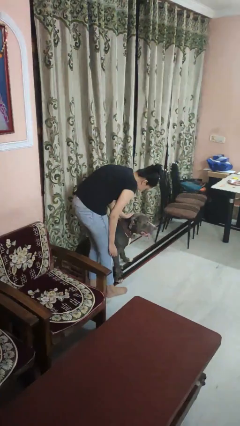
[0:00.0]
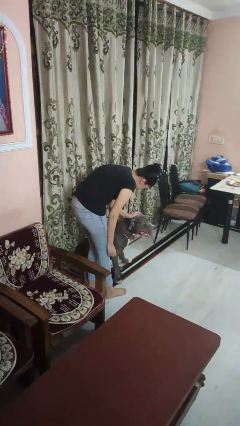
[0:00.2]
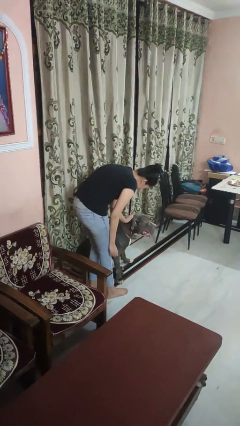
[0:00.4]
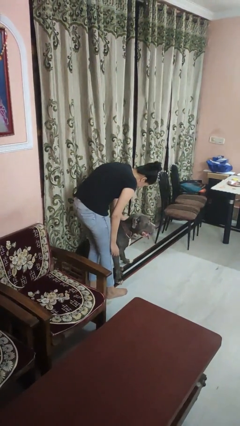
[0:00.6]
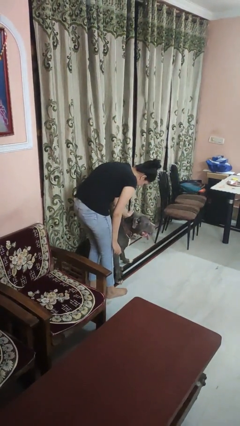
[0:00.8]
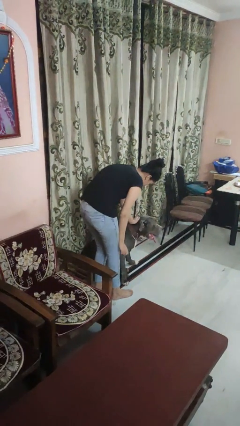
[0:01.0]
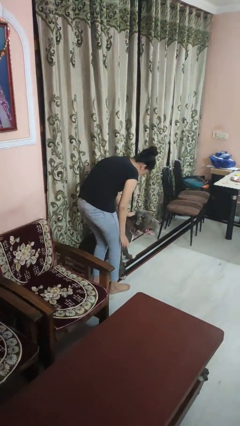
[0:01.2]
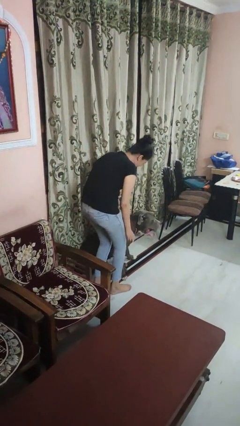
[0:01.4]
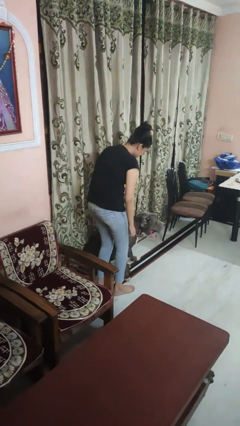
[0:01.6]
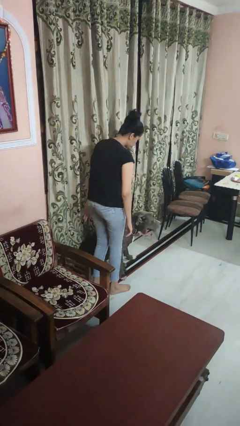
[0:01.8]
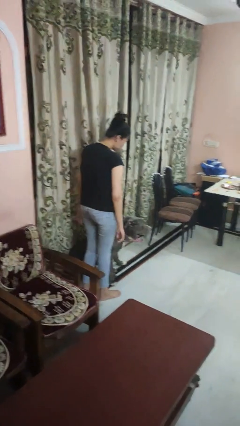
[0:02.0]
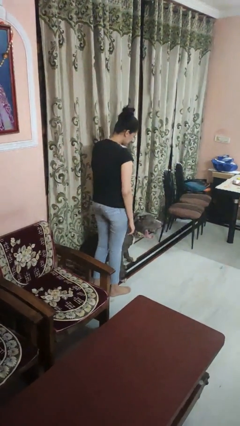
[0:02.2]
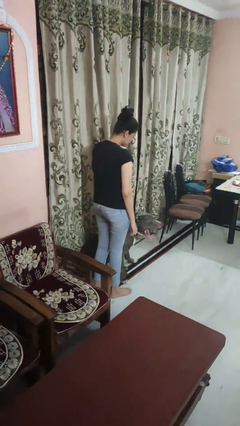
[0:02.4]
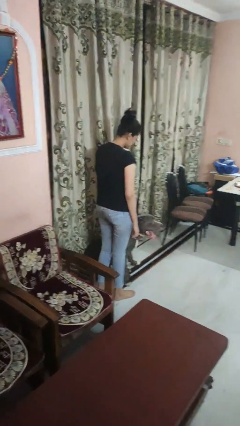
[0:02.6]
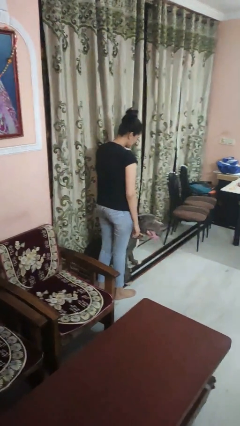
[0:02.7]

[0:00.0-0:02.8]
person pets dog

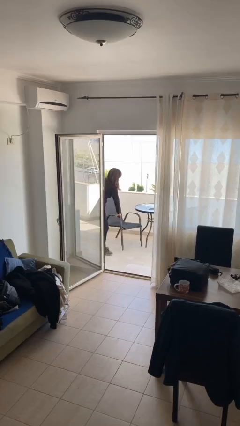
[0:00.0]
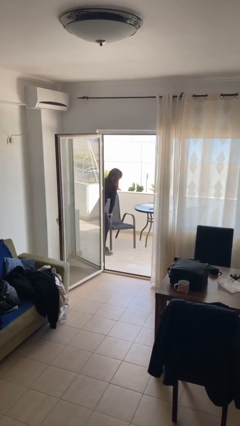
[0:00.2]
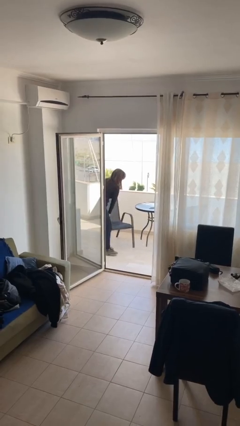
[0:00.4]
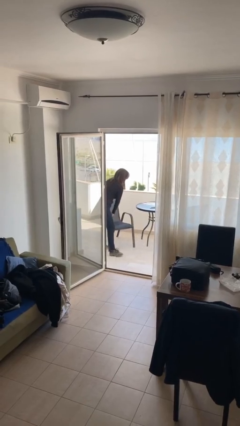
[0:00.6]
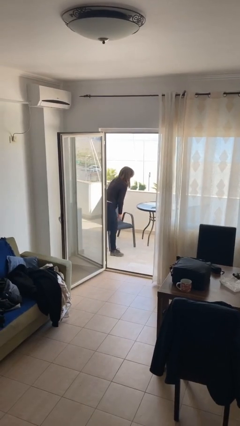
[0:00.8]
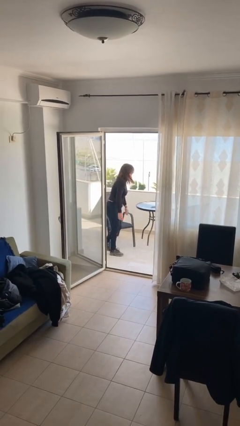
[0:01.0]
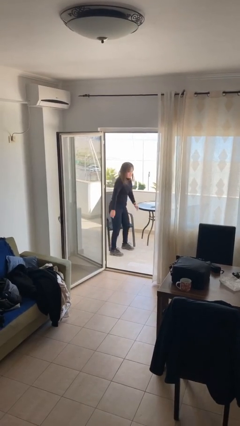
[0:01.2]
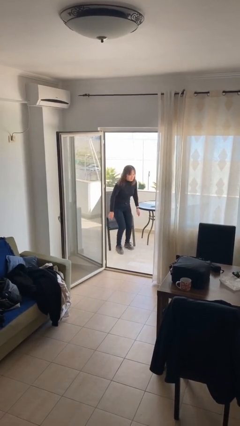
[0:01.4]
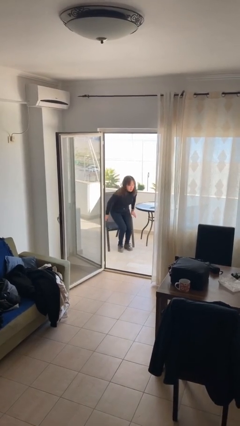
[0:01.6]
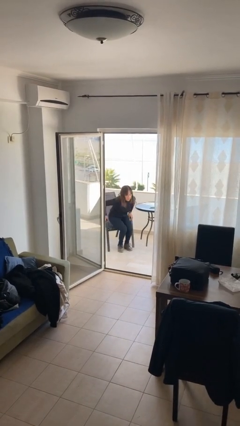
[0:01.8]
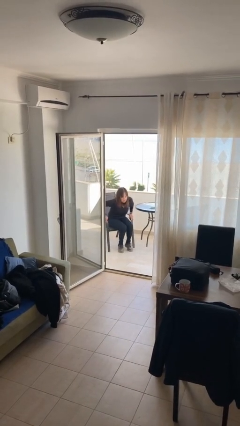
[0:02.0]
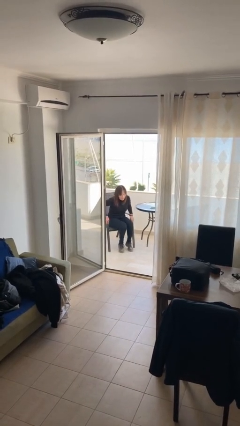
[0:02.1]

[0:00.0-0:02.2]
person sits down

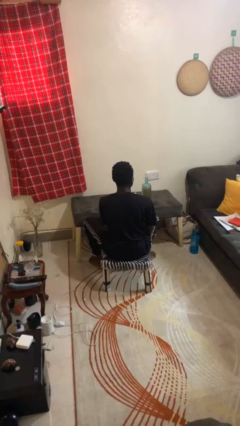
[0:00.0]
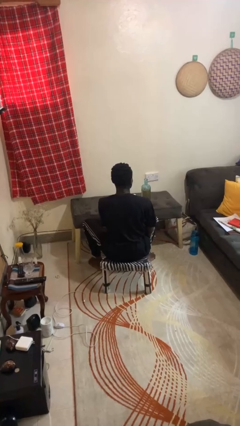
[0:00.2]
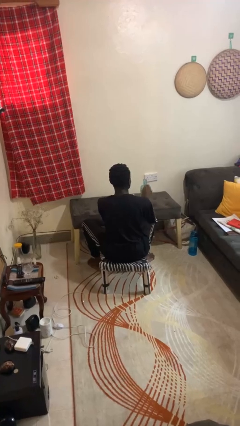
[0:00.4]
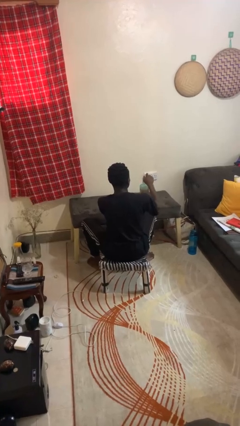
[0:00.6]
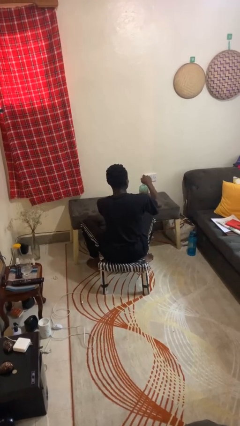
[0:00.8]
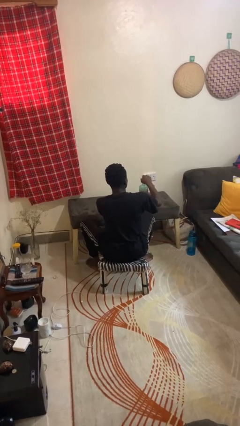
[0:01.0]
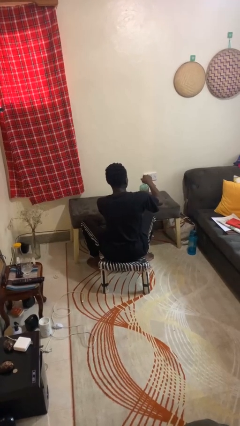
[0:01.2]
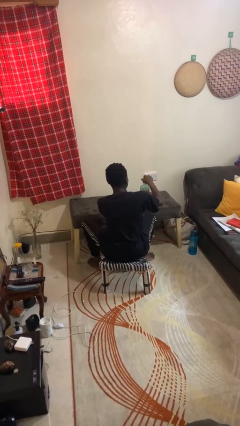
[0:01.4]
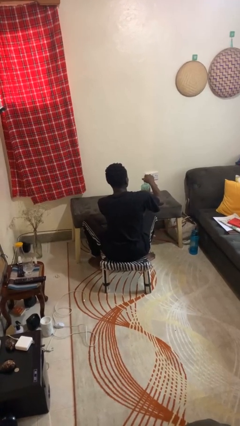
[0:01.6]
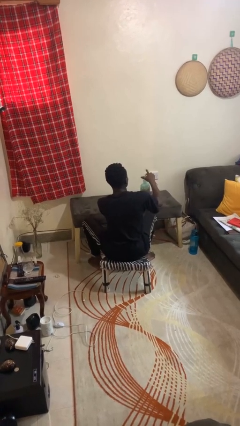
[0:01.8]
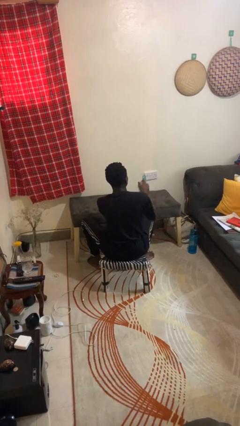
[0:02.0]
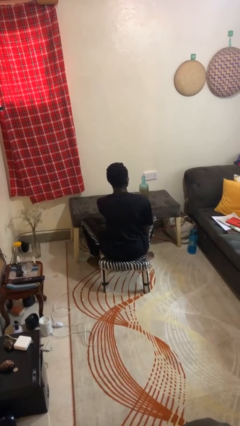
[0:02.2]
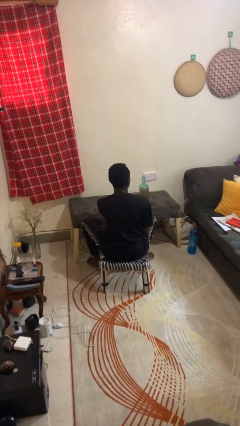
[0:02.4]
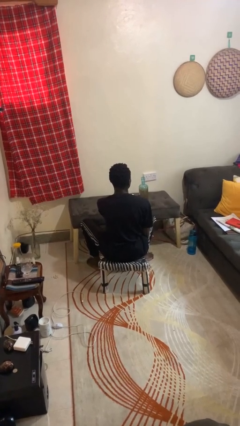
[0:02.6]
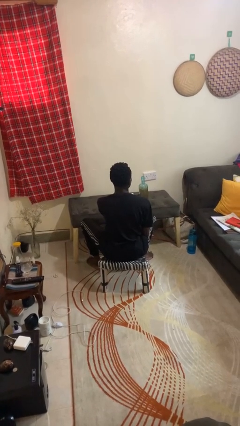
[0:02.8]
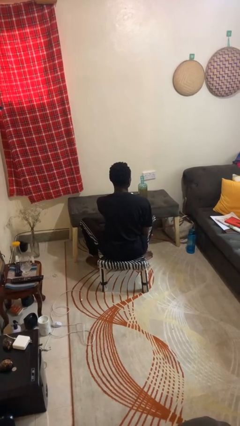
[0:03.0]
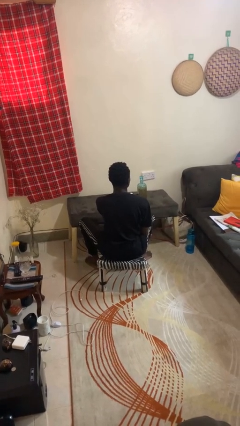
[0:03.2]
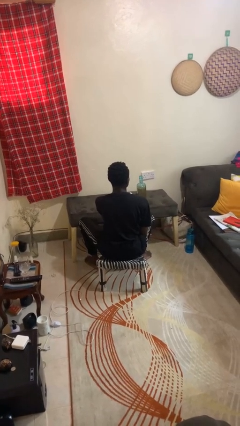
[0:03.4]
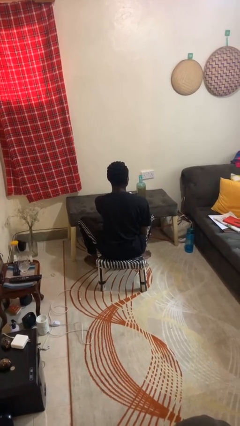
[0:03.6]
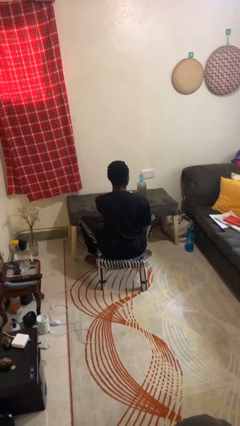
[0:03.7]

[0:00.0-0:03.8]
person closes jar

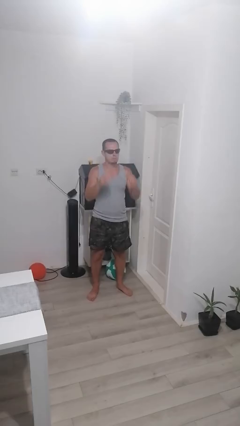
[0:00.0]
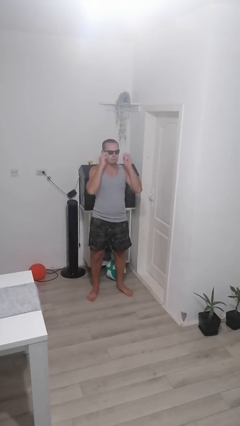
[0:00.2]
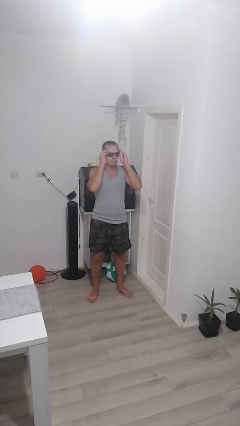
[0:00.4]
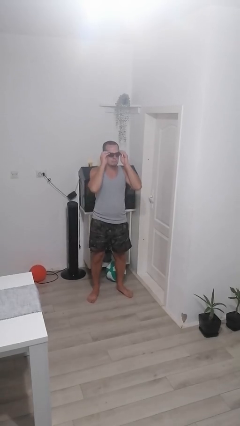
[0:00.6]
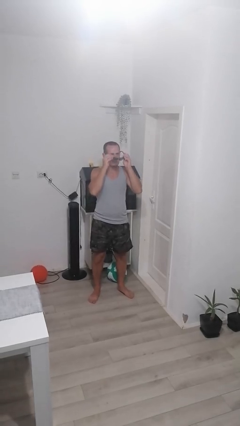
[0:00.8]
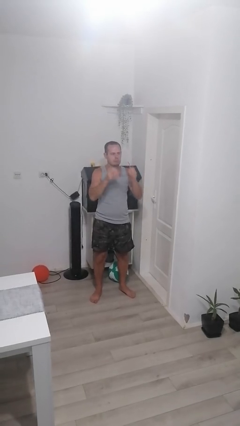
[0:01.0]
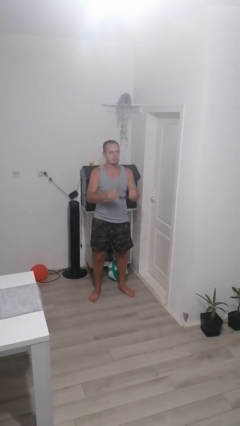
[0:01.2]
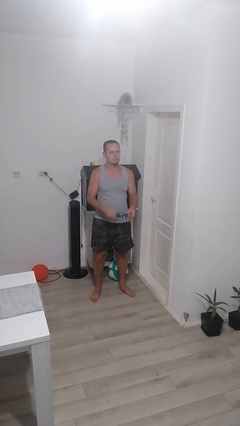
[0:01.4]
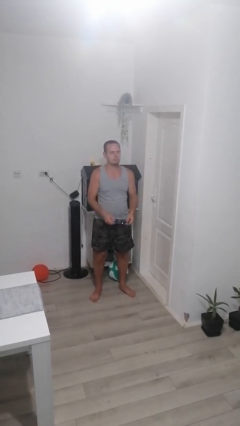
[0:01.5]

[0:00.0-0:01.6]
person takes off sunglasses

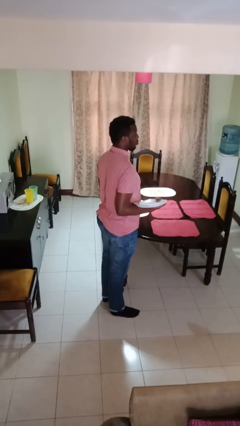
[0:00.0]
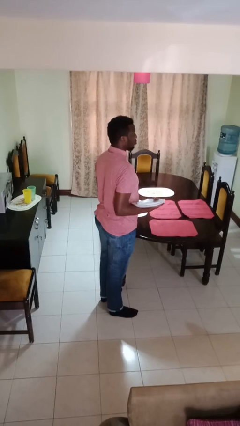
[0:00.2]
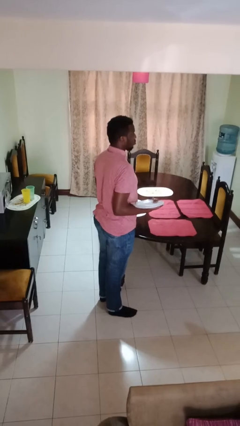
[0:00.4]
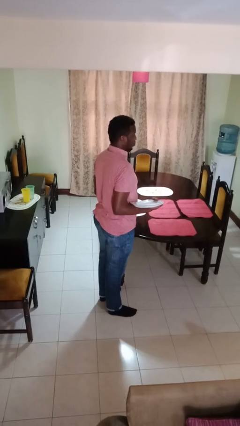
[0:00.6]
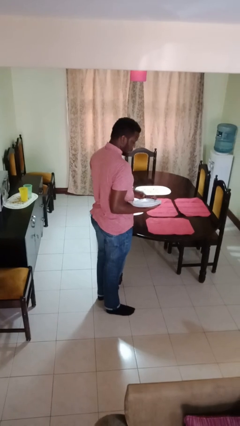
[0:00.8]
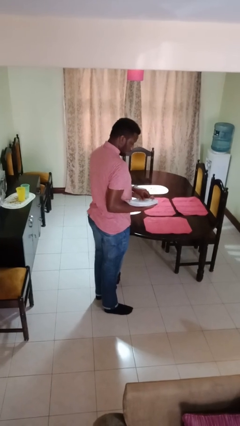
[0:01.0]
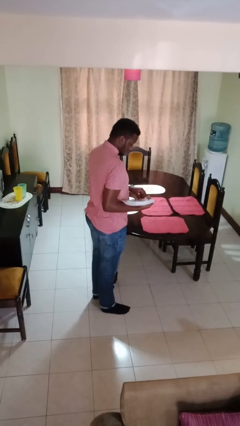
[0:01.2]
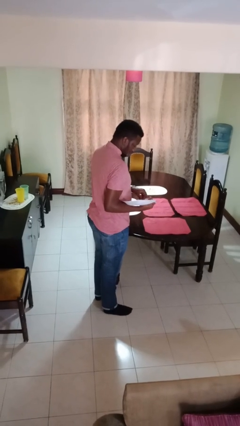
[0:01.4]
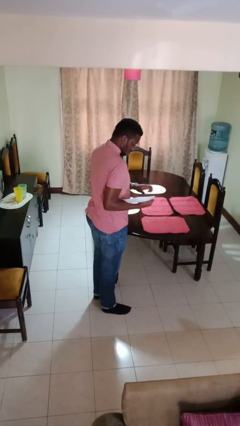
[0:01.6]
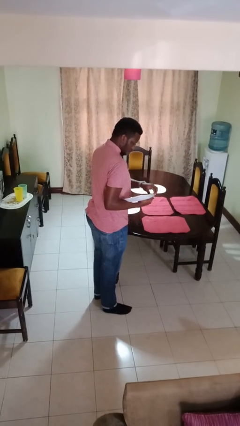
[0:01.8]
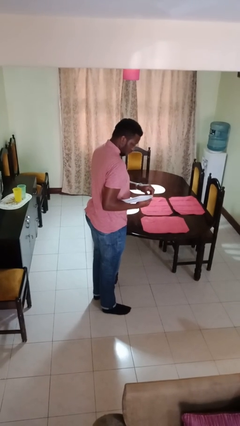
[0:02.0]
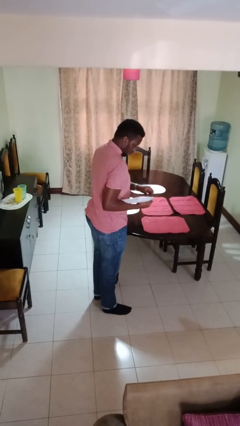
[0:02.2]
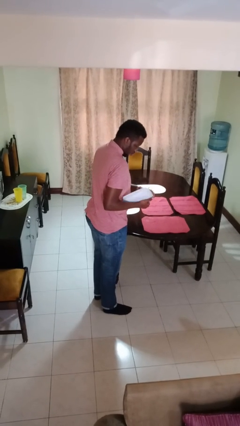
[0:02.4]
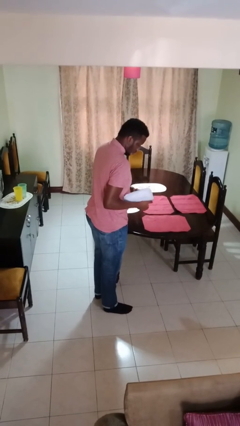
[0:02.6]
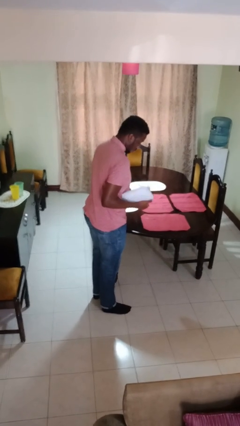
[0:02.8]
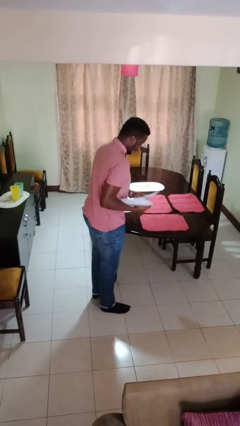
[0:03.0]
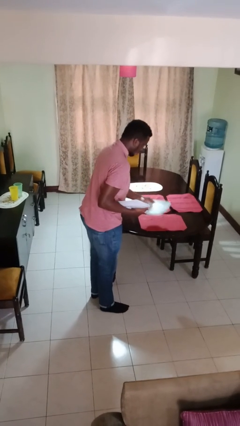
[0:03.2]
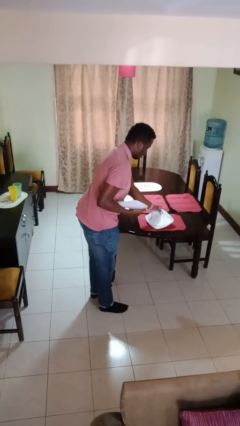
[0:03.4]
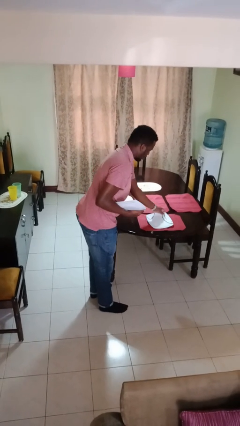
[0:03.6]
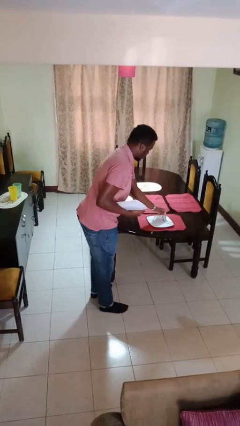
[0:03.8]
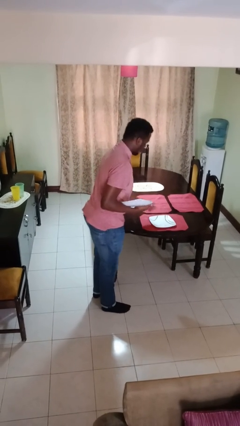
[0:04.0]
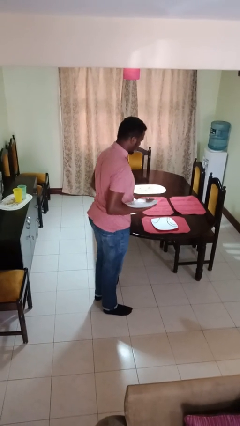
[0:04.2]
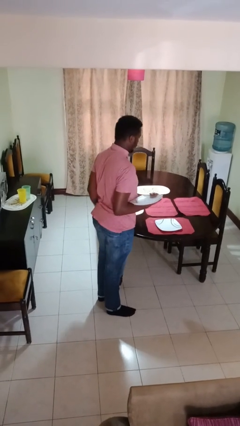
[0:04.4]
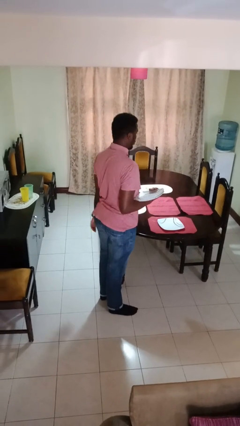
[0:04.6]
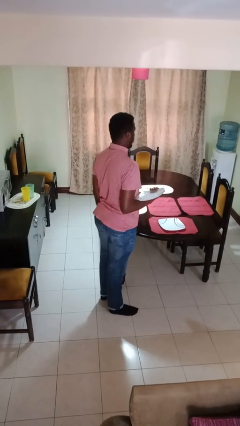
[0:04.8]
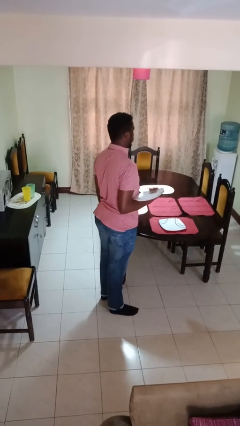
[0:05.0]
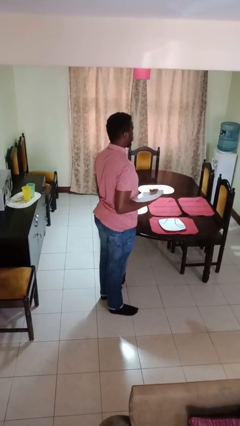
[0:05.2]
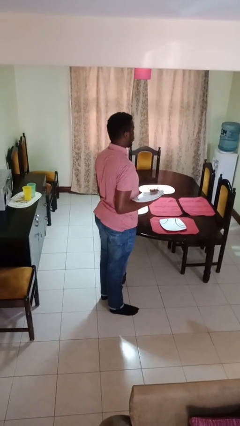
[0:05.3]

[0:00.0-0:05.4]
person sets table

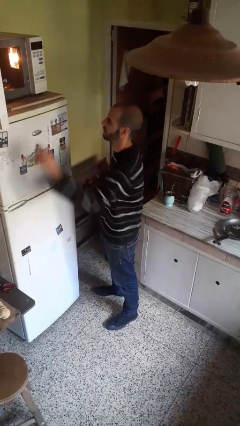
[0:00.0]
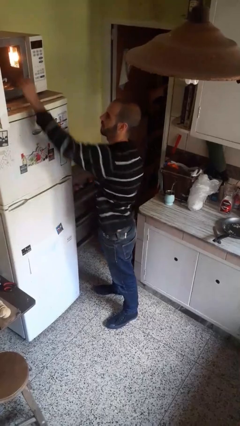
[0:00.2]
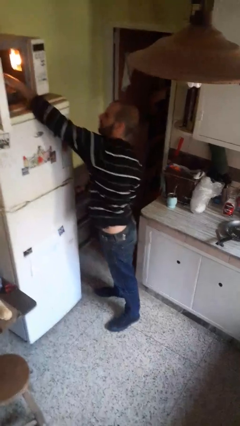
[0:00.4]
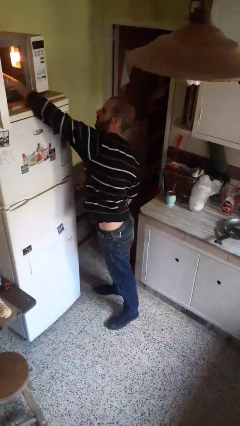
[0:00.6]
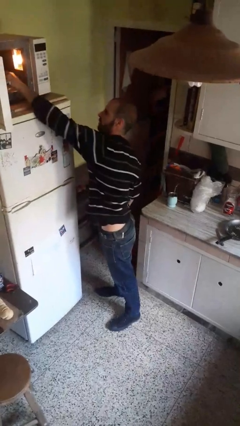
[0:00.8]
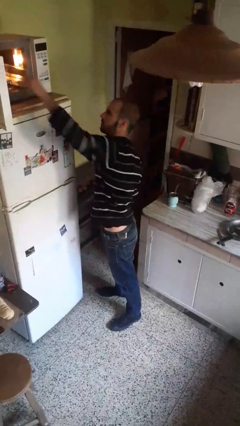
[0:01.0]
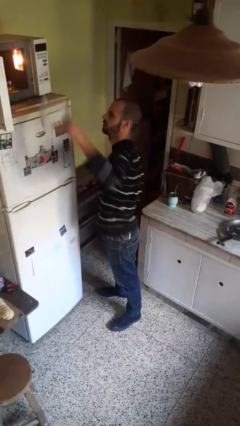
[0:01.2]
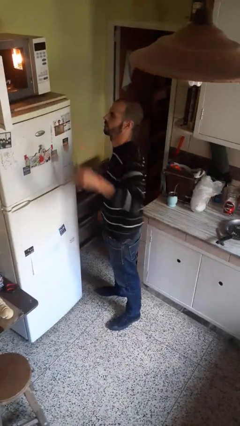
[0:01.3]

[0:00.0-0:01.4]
person takes object from microwave

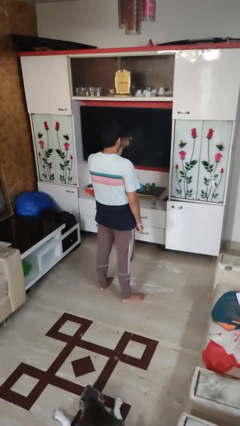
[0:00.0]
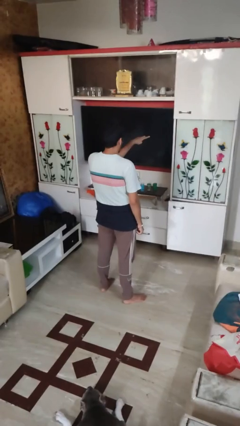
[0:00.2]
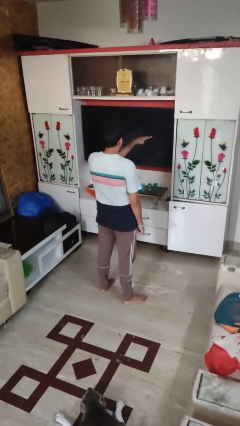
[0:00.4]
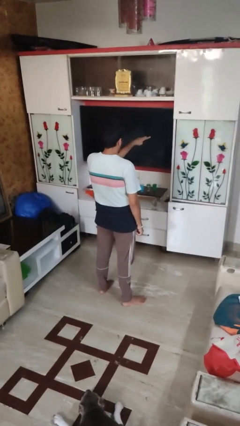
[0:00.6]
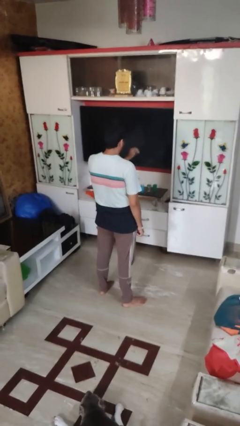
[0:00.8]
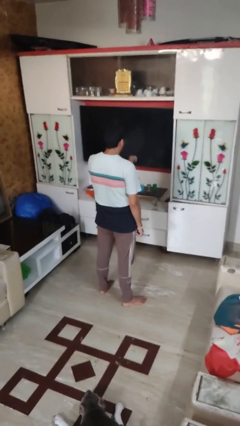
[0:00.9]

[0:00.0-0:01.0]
person gestures watch closely
